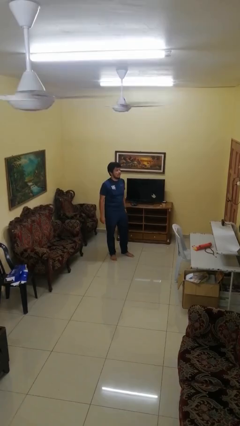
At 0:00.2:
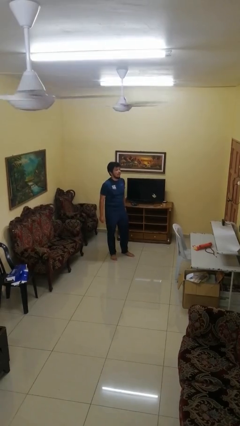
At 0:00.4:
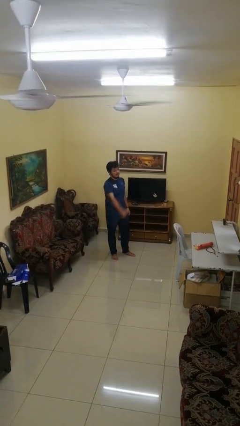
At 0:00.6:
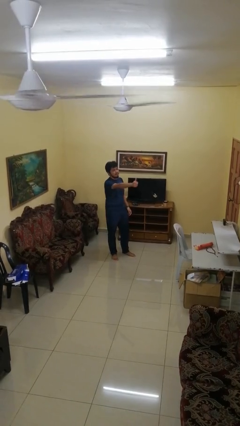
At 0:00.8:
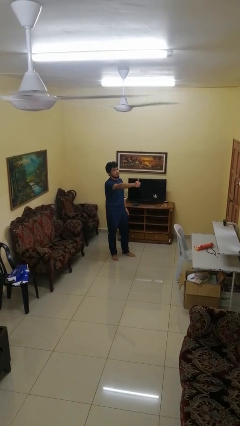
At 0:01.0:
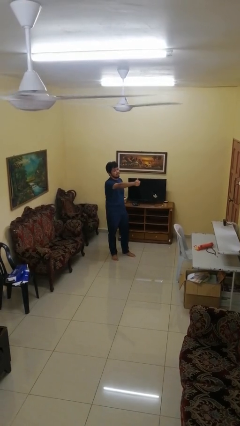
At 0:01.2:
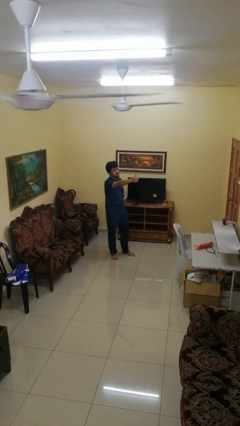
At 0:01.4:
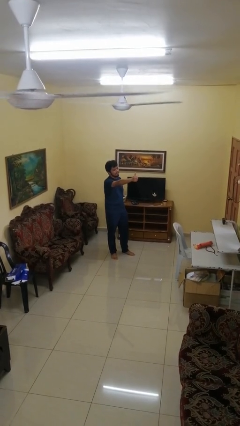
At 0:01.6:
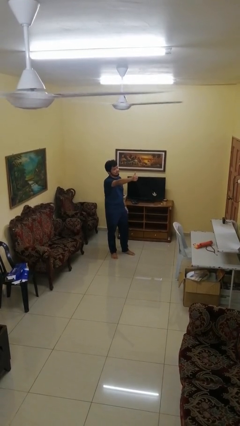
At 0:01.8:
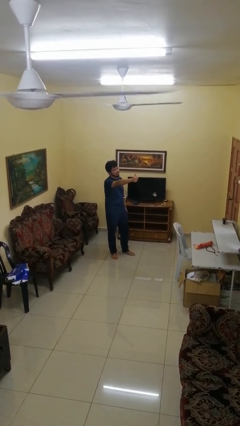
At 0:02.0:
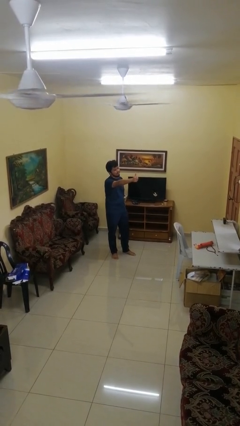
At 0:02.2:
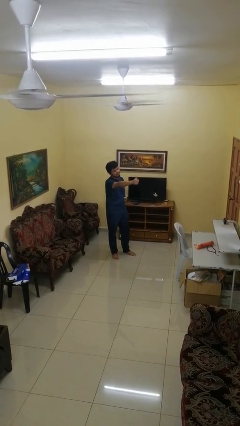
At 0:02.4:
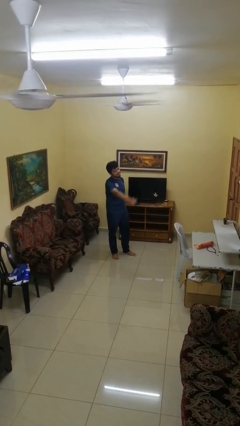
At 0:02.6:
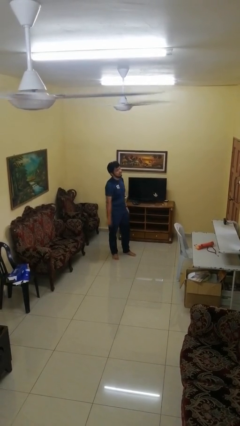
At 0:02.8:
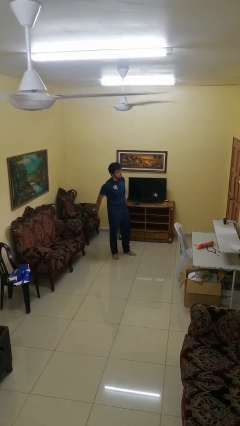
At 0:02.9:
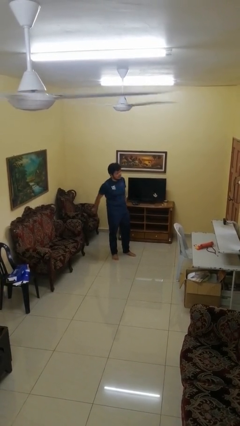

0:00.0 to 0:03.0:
person gestures thumbs up

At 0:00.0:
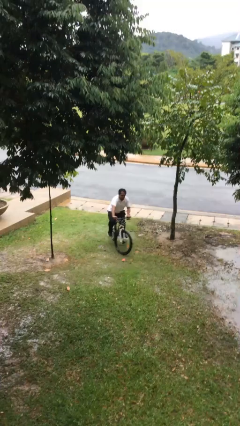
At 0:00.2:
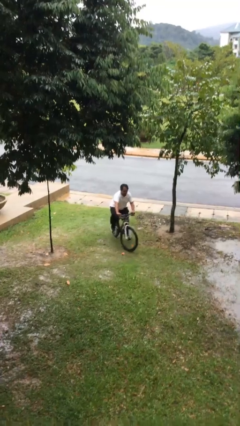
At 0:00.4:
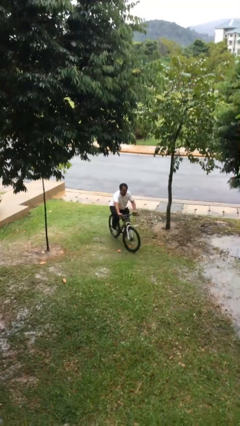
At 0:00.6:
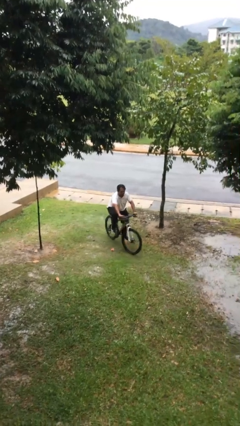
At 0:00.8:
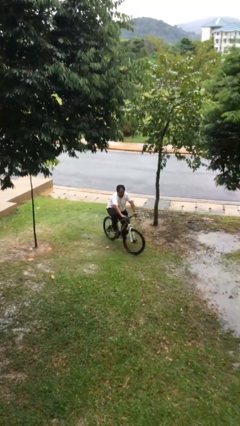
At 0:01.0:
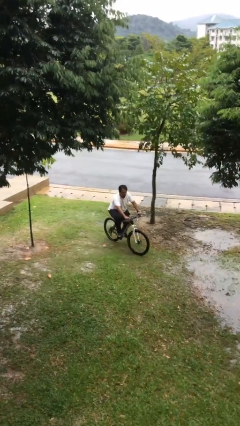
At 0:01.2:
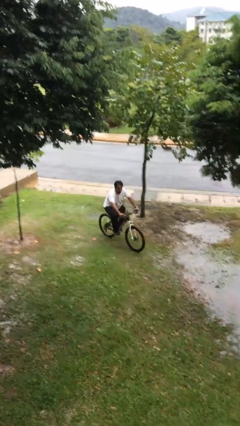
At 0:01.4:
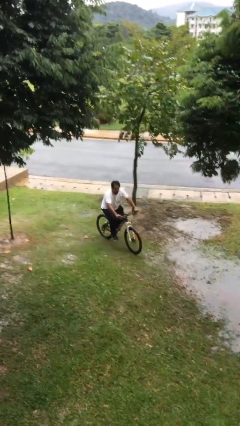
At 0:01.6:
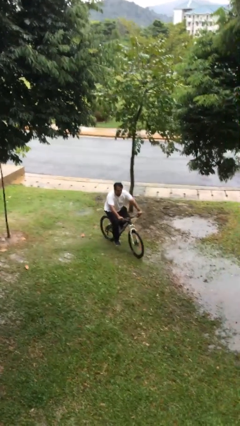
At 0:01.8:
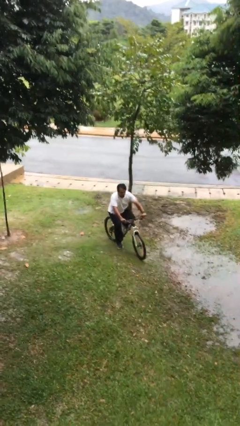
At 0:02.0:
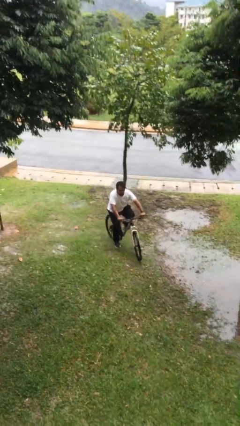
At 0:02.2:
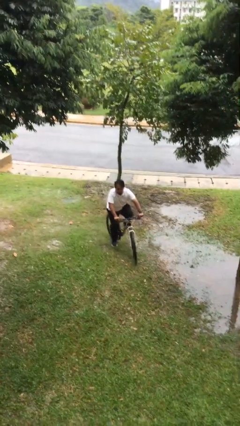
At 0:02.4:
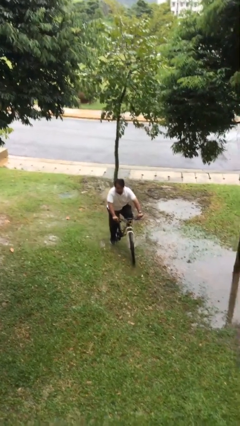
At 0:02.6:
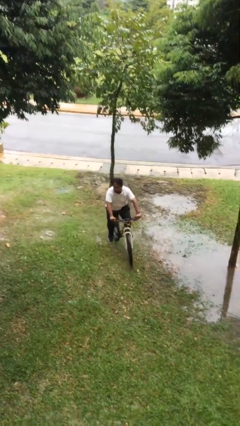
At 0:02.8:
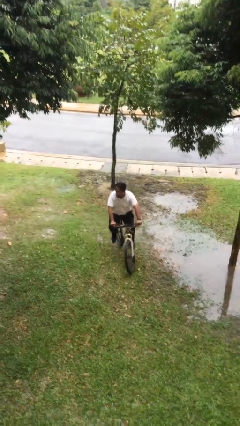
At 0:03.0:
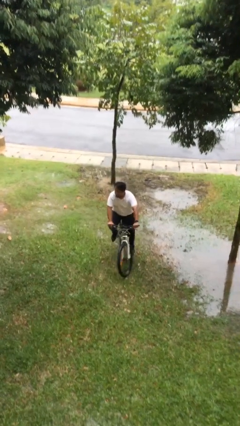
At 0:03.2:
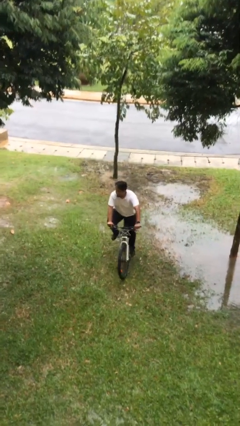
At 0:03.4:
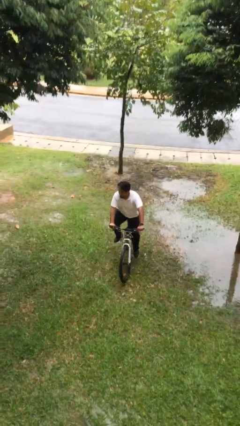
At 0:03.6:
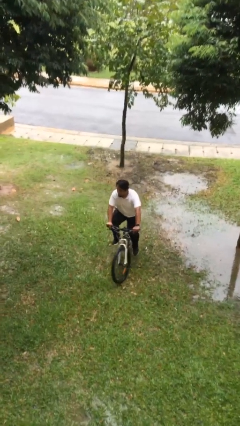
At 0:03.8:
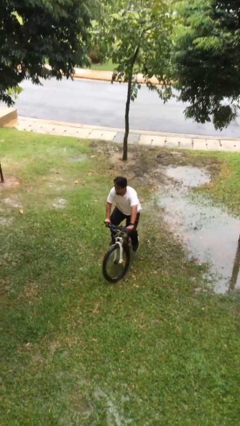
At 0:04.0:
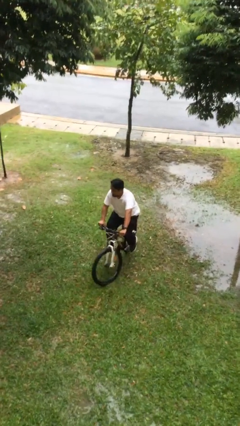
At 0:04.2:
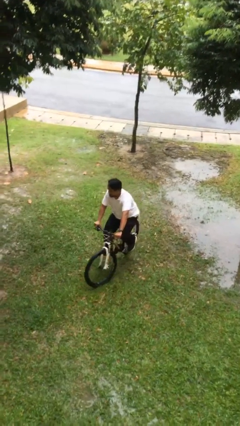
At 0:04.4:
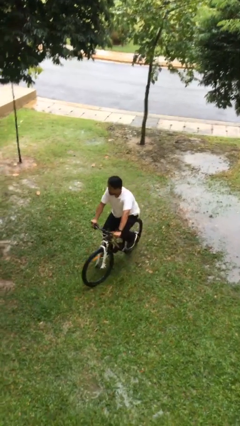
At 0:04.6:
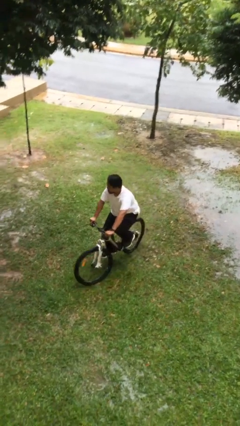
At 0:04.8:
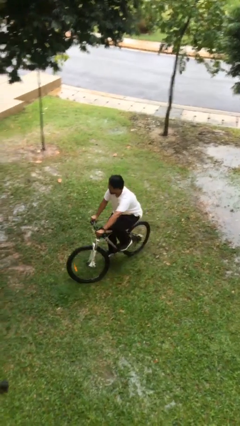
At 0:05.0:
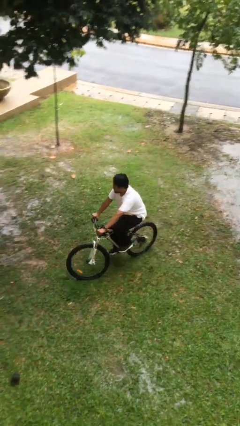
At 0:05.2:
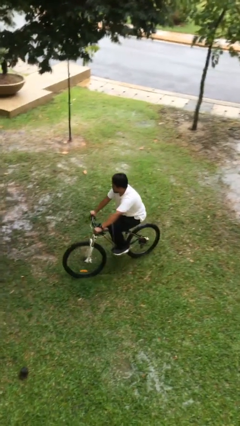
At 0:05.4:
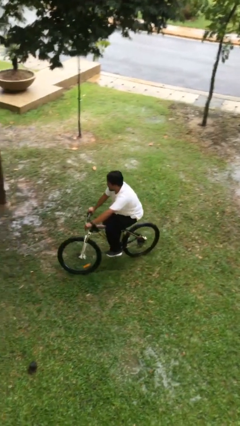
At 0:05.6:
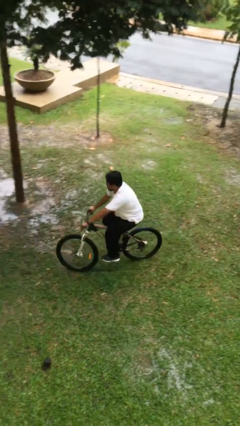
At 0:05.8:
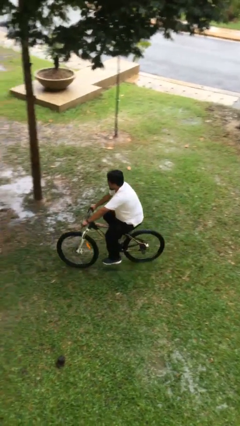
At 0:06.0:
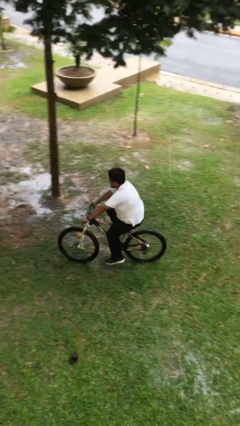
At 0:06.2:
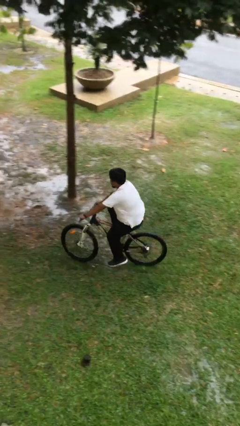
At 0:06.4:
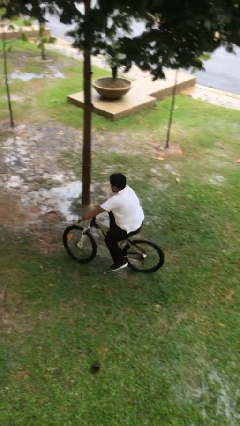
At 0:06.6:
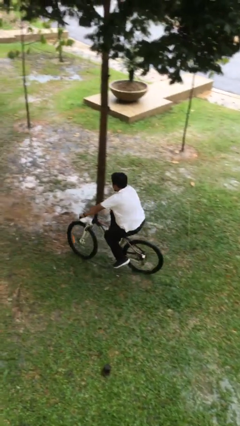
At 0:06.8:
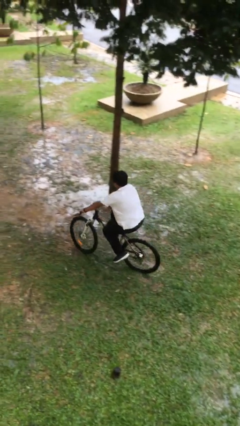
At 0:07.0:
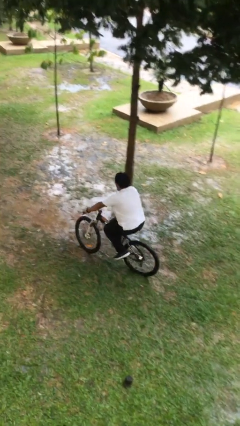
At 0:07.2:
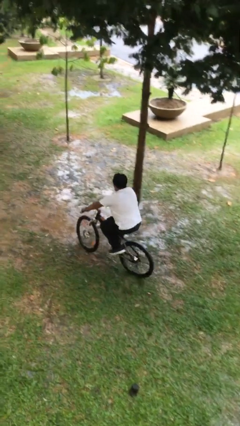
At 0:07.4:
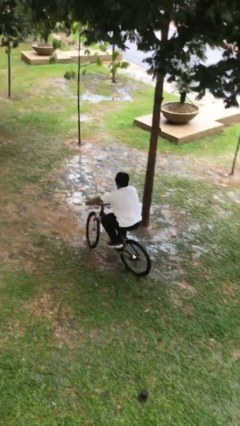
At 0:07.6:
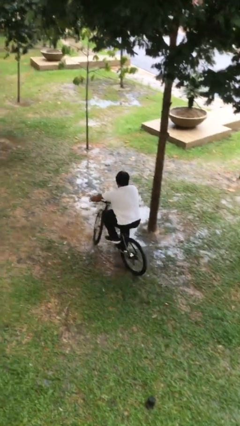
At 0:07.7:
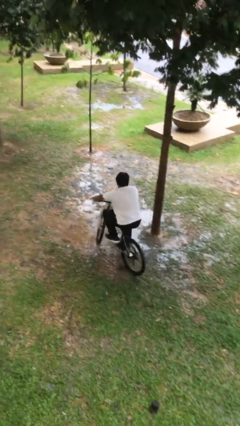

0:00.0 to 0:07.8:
person rides bicycle

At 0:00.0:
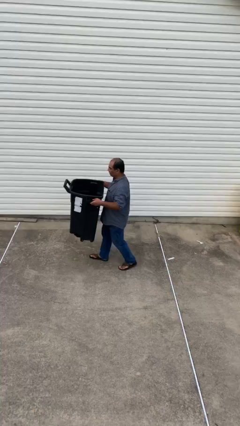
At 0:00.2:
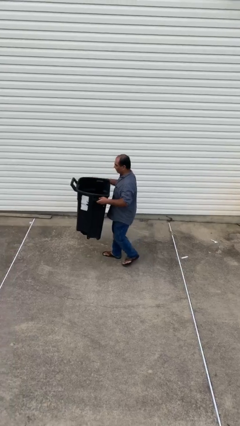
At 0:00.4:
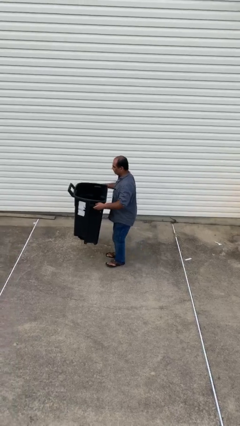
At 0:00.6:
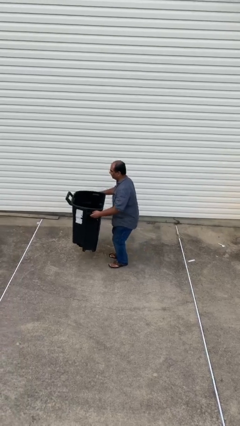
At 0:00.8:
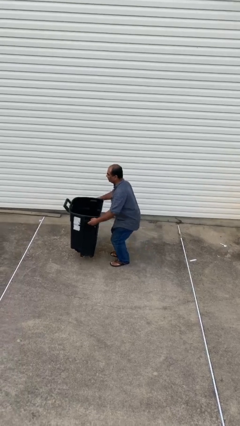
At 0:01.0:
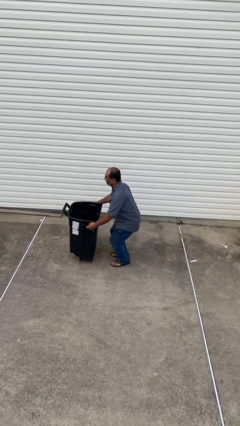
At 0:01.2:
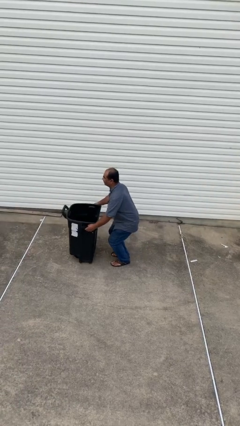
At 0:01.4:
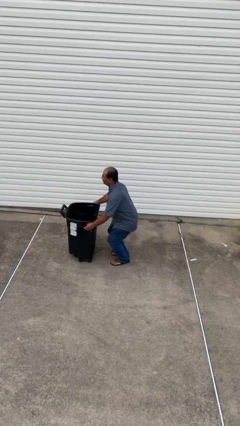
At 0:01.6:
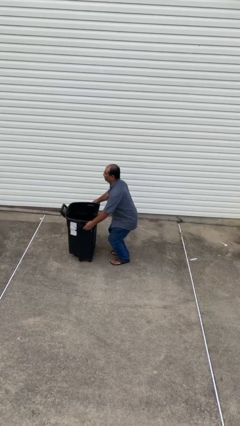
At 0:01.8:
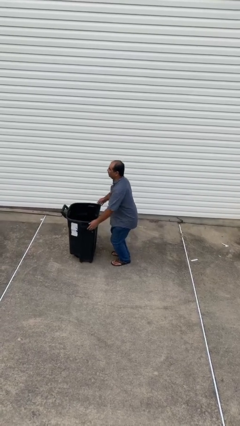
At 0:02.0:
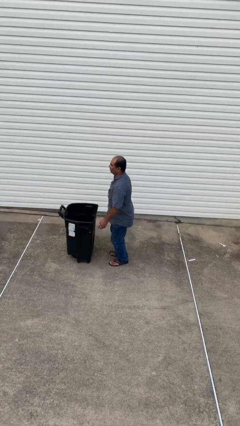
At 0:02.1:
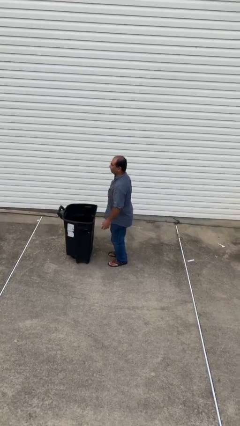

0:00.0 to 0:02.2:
person puts down object on floor

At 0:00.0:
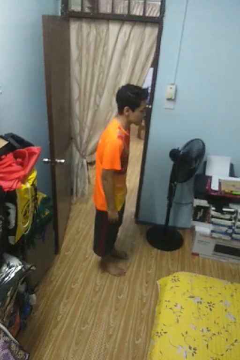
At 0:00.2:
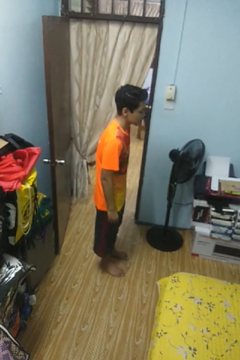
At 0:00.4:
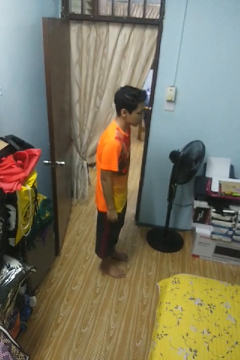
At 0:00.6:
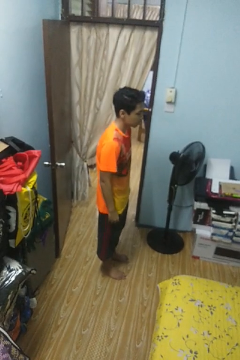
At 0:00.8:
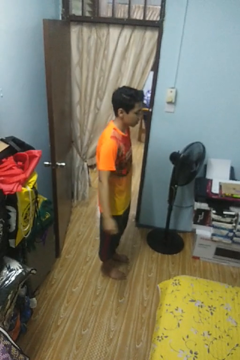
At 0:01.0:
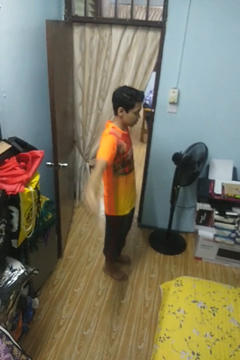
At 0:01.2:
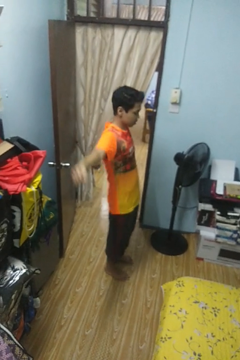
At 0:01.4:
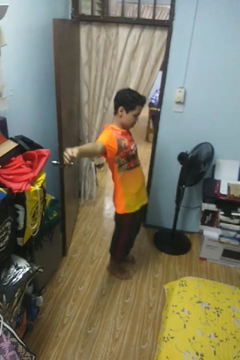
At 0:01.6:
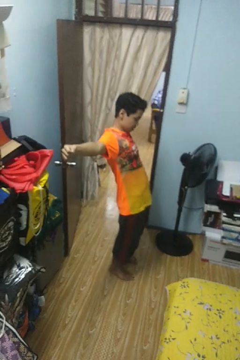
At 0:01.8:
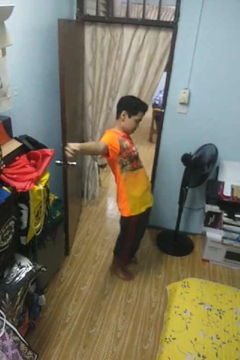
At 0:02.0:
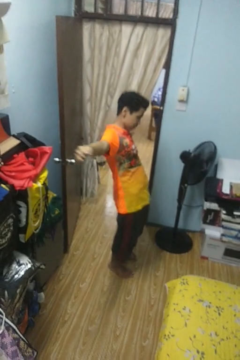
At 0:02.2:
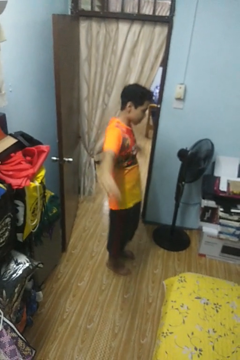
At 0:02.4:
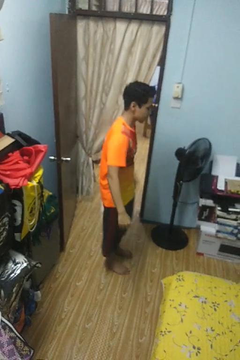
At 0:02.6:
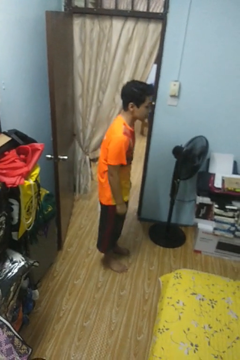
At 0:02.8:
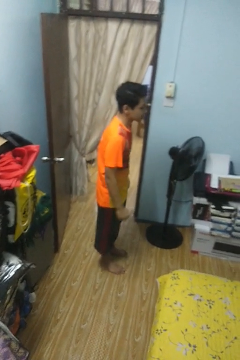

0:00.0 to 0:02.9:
person stretches arms to side

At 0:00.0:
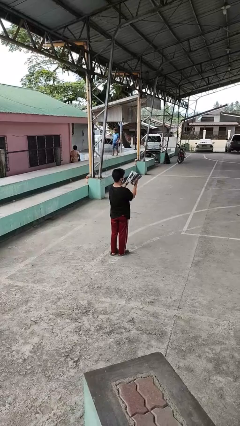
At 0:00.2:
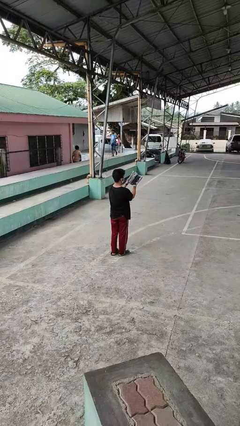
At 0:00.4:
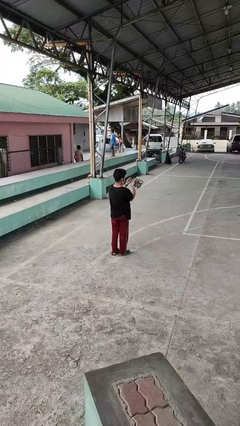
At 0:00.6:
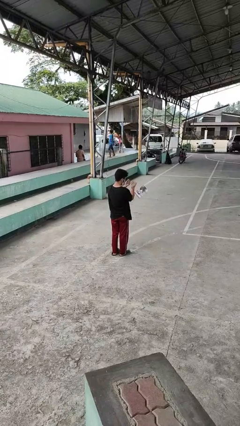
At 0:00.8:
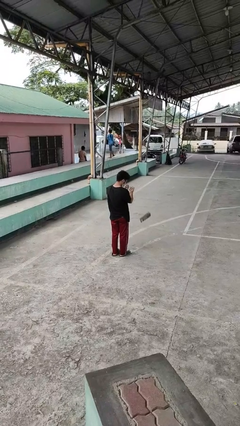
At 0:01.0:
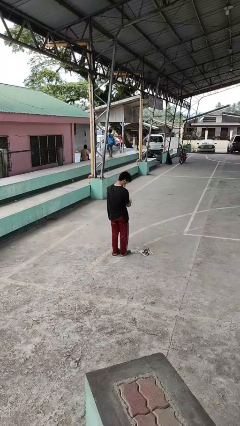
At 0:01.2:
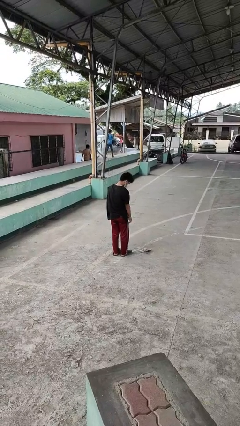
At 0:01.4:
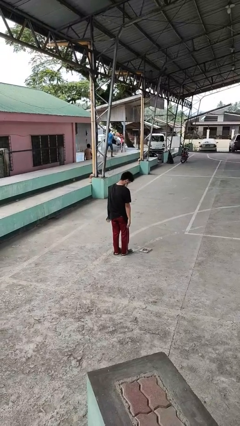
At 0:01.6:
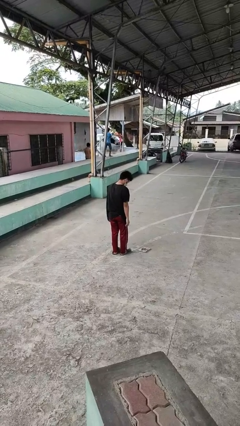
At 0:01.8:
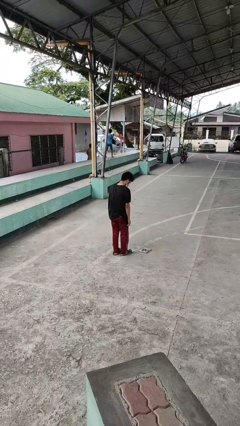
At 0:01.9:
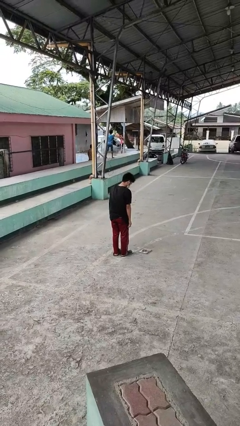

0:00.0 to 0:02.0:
person drops object

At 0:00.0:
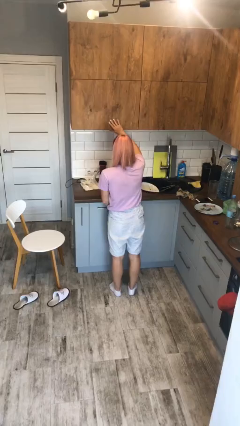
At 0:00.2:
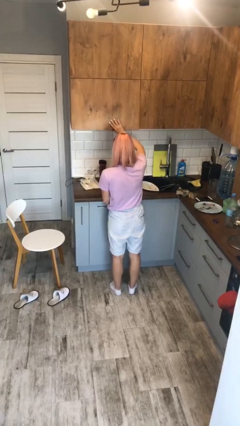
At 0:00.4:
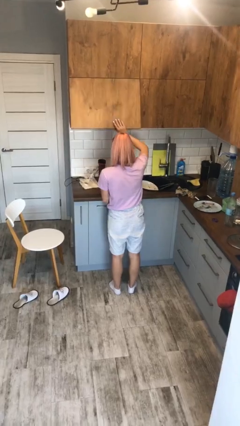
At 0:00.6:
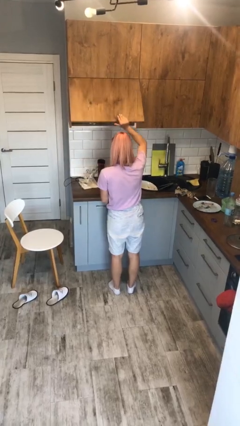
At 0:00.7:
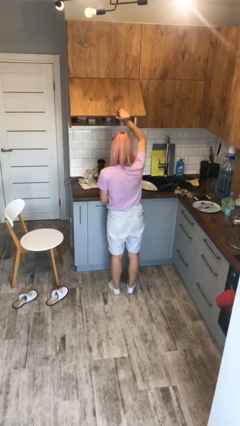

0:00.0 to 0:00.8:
person closes cabinet
